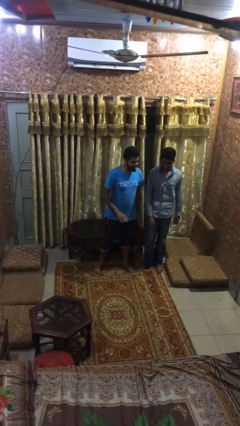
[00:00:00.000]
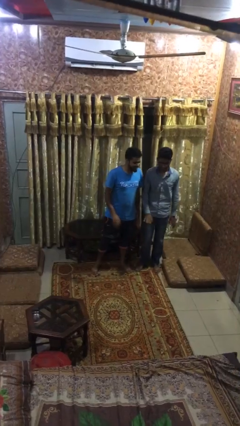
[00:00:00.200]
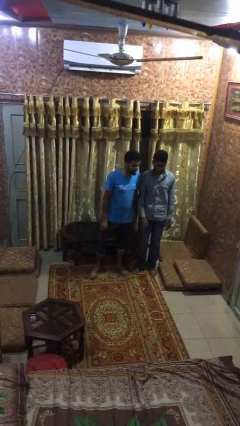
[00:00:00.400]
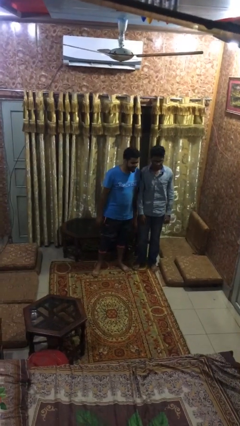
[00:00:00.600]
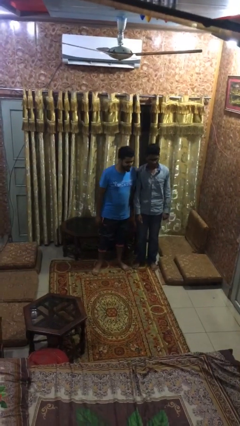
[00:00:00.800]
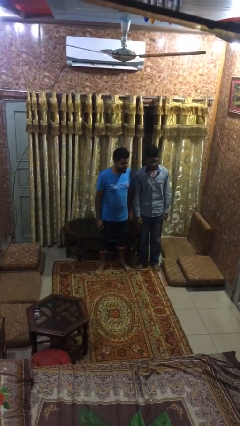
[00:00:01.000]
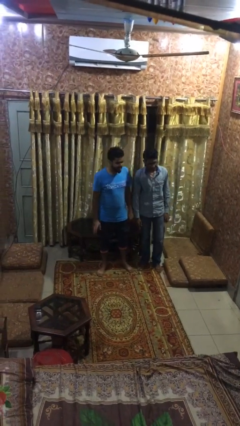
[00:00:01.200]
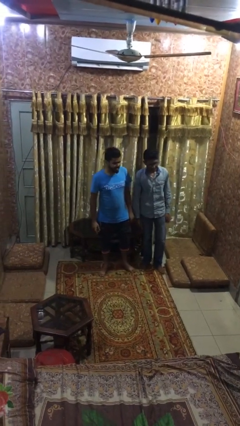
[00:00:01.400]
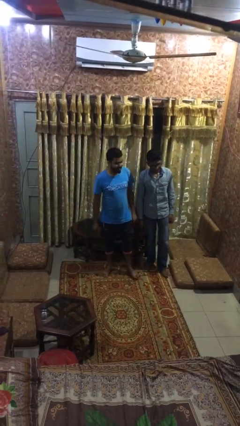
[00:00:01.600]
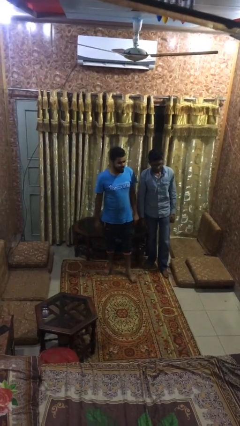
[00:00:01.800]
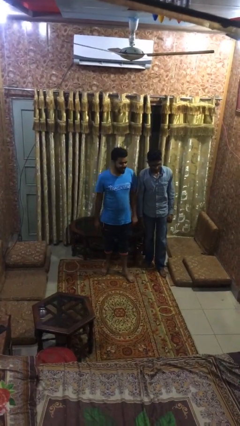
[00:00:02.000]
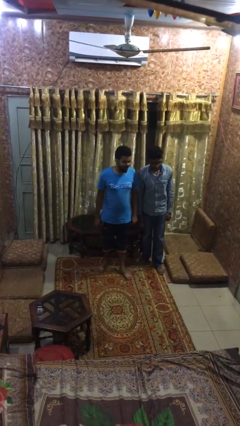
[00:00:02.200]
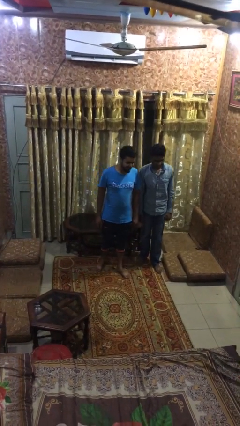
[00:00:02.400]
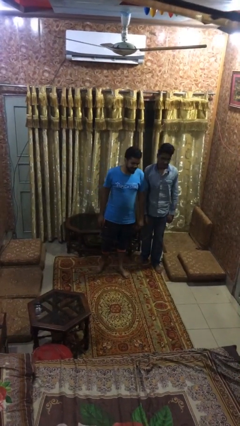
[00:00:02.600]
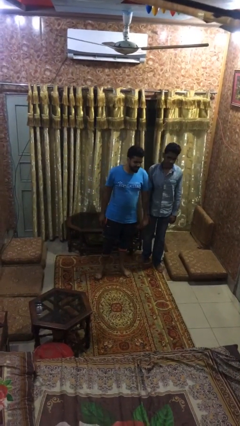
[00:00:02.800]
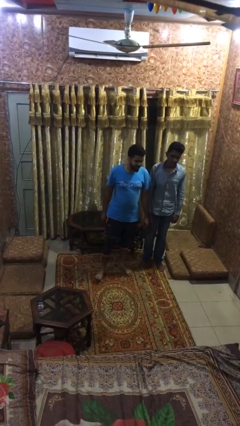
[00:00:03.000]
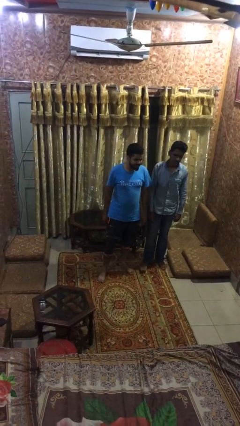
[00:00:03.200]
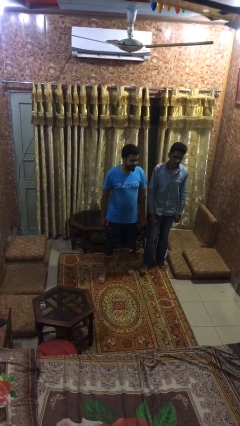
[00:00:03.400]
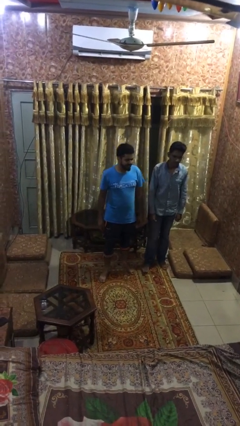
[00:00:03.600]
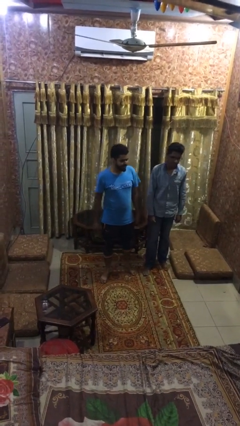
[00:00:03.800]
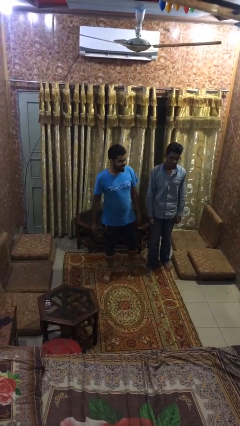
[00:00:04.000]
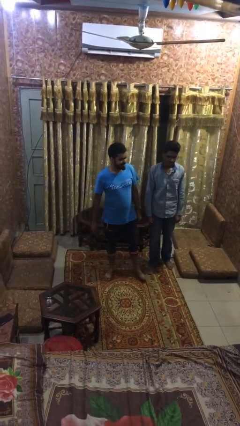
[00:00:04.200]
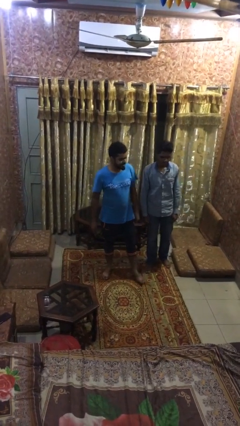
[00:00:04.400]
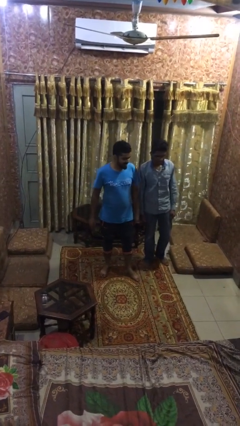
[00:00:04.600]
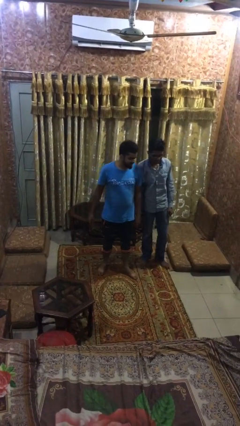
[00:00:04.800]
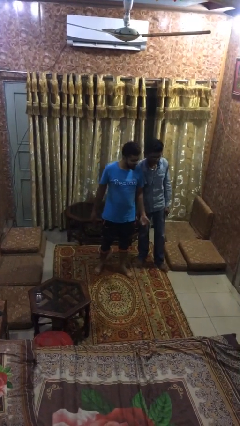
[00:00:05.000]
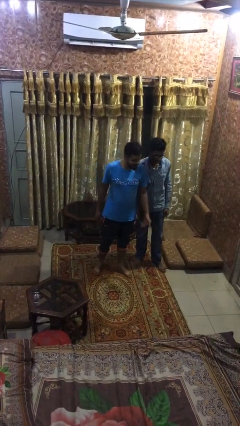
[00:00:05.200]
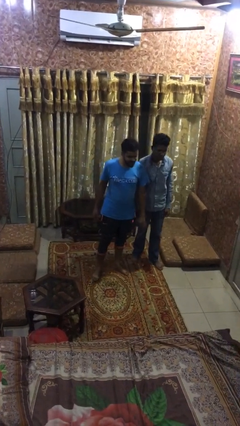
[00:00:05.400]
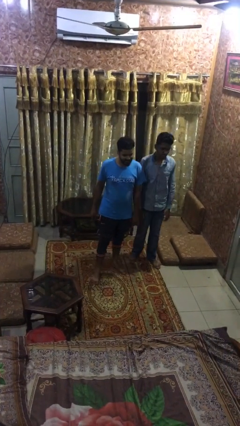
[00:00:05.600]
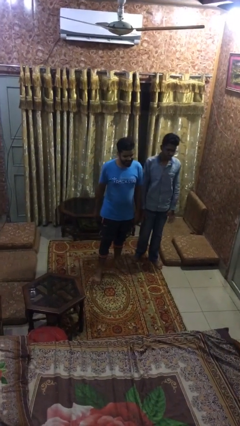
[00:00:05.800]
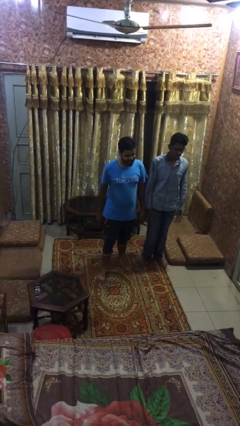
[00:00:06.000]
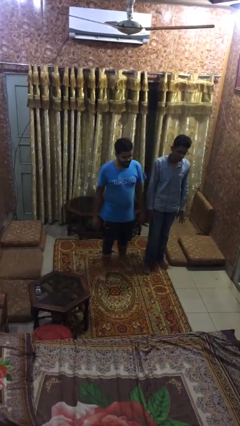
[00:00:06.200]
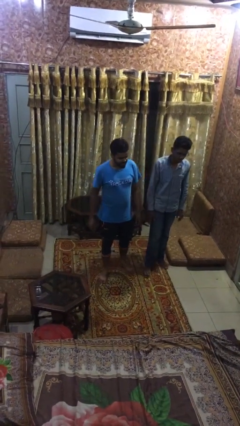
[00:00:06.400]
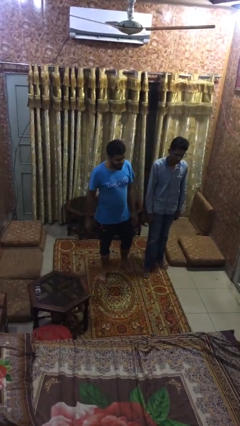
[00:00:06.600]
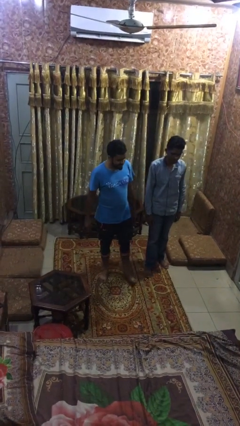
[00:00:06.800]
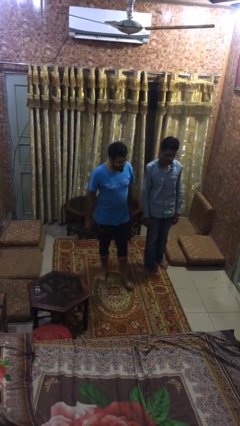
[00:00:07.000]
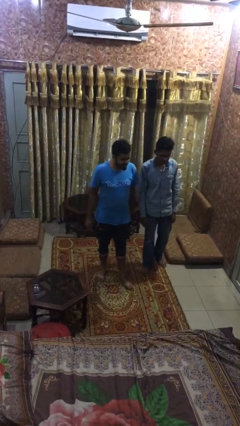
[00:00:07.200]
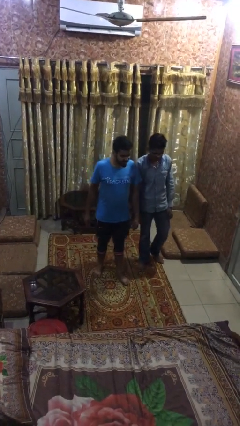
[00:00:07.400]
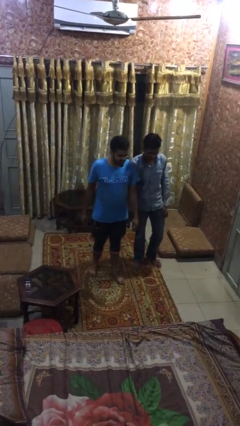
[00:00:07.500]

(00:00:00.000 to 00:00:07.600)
person talks to person

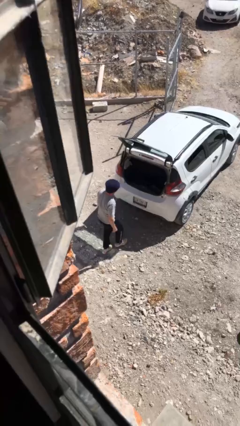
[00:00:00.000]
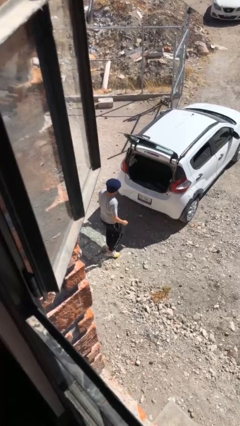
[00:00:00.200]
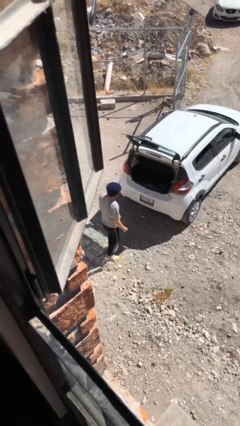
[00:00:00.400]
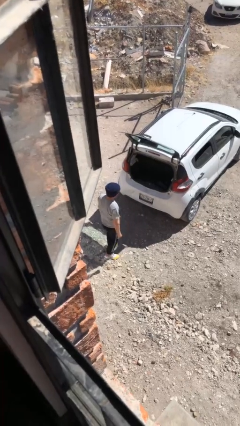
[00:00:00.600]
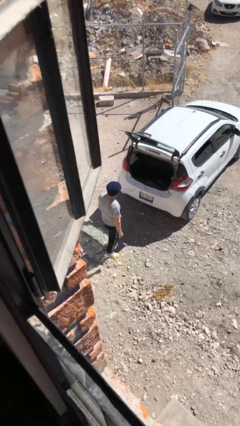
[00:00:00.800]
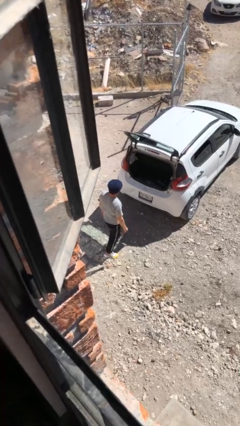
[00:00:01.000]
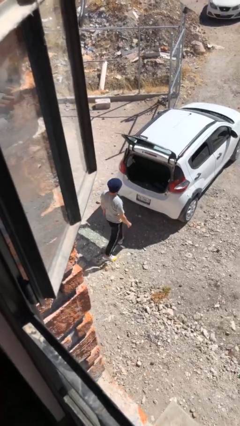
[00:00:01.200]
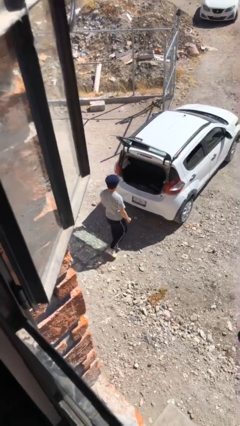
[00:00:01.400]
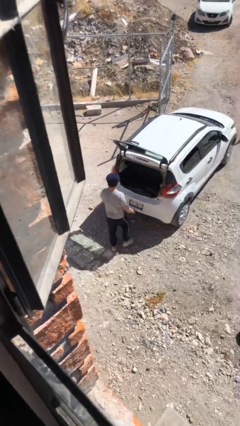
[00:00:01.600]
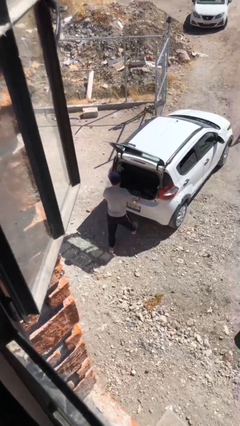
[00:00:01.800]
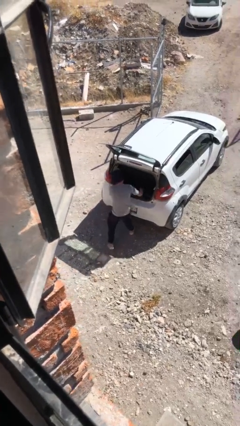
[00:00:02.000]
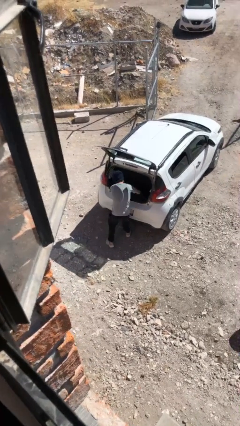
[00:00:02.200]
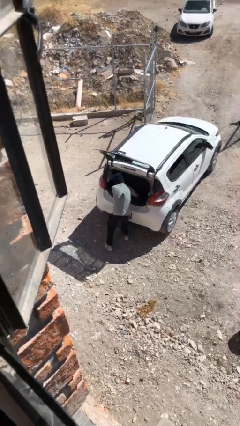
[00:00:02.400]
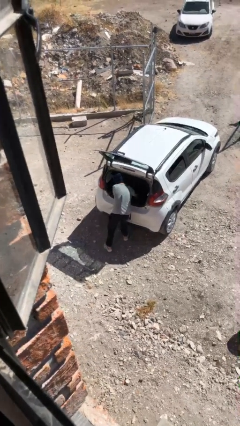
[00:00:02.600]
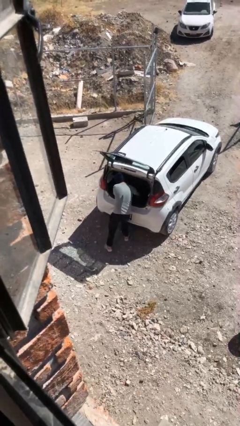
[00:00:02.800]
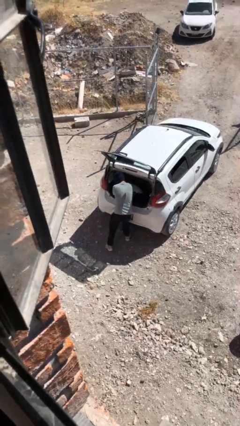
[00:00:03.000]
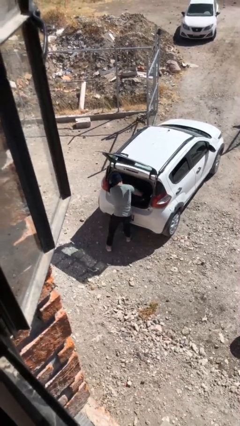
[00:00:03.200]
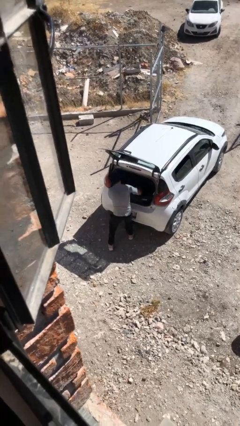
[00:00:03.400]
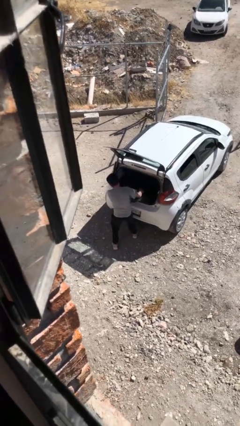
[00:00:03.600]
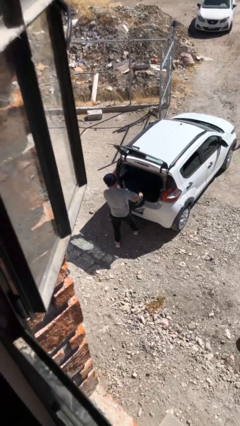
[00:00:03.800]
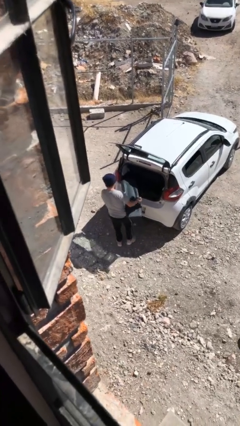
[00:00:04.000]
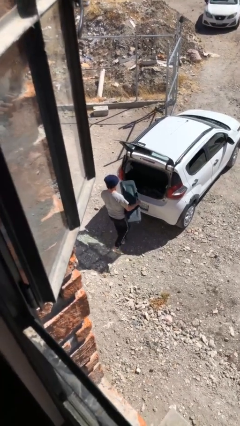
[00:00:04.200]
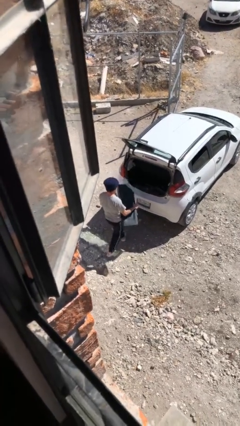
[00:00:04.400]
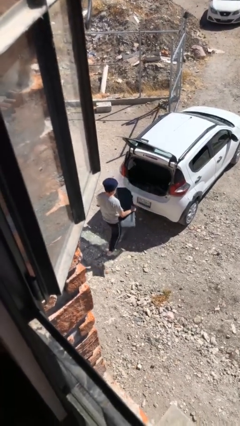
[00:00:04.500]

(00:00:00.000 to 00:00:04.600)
person unloads car

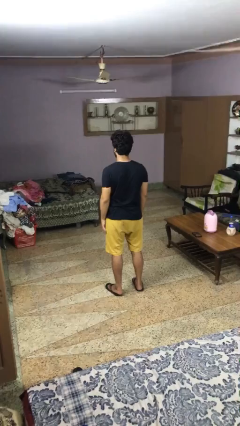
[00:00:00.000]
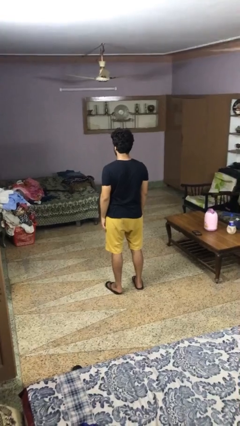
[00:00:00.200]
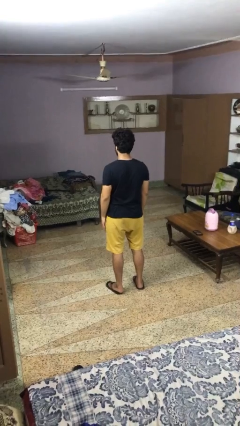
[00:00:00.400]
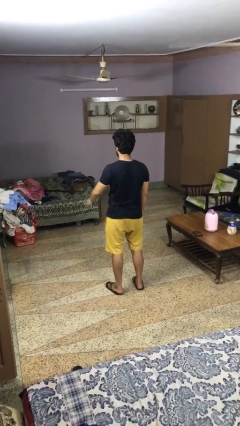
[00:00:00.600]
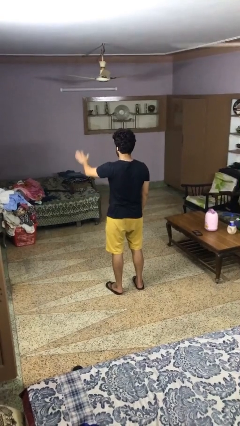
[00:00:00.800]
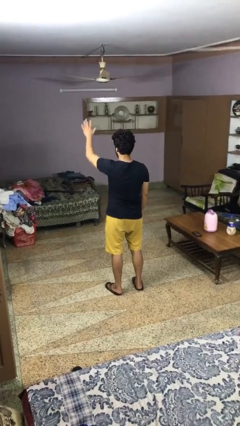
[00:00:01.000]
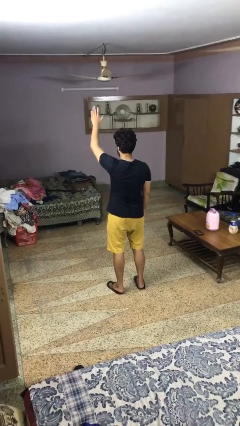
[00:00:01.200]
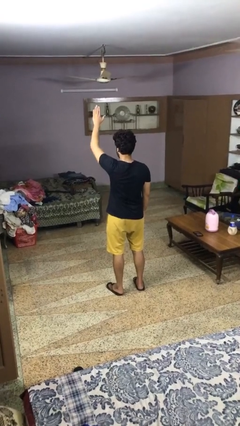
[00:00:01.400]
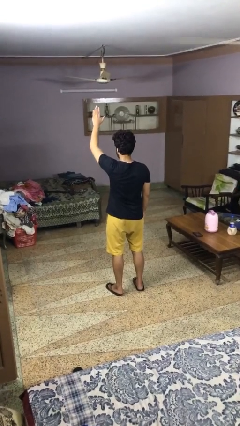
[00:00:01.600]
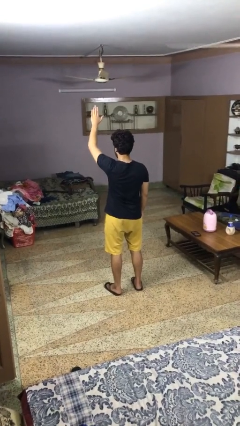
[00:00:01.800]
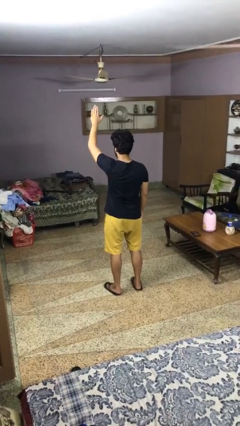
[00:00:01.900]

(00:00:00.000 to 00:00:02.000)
person gestures raise hand

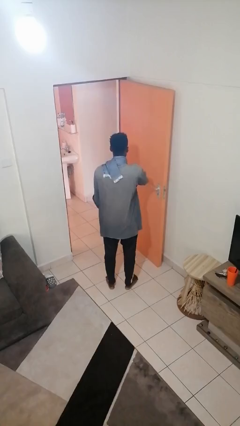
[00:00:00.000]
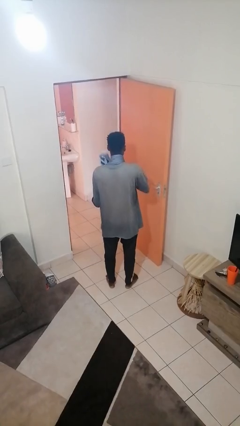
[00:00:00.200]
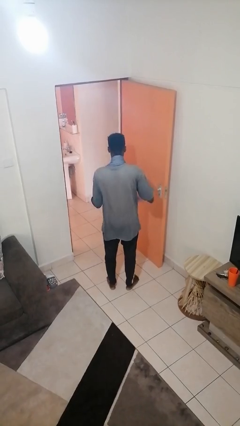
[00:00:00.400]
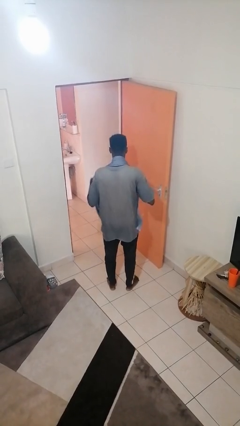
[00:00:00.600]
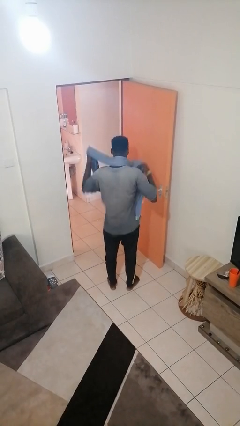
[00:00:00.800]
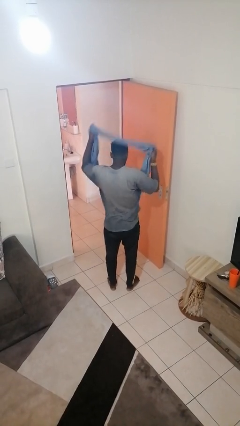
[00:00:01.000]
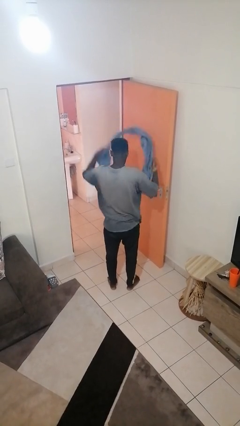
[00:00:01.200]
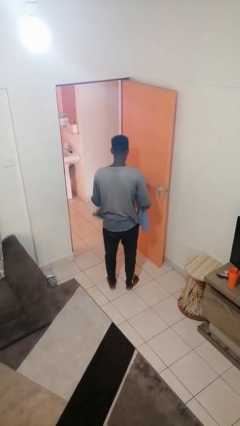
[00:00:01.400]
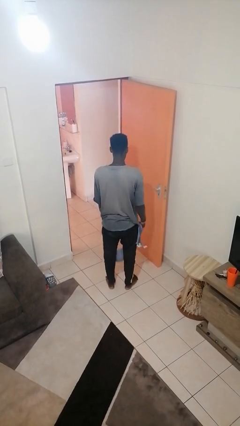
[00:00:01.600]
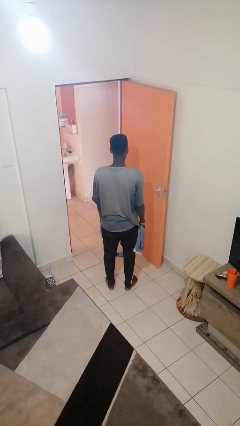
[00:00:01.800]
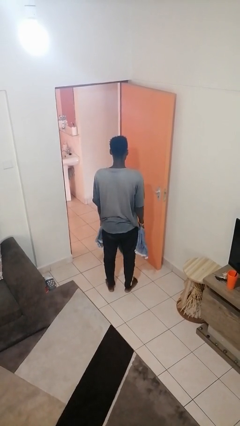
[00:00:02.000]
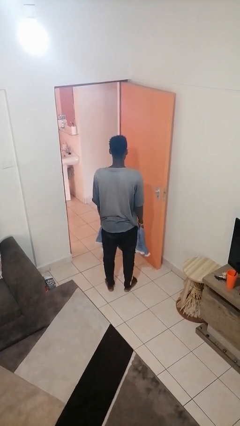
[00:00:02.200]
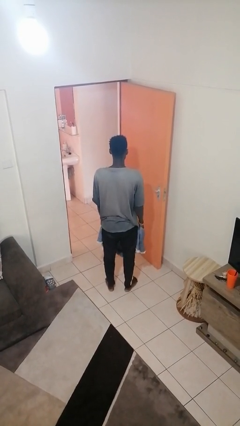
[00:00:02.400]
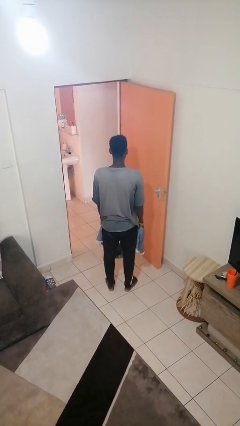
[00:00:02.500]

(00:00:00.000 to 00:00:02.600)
person takes off scarf

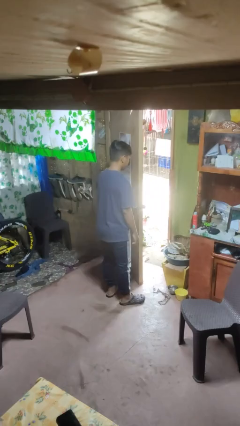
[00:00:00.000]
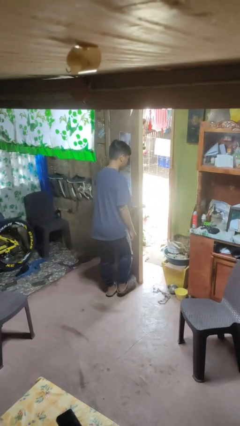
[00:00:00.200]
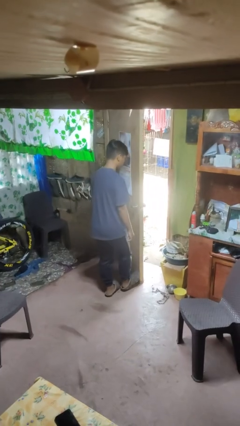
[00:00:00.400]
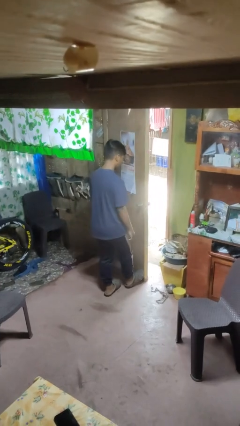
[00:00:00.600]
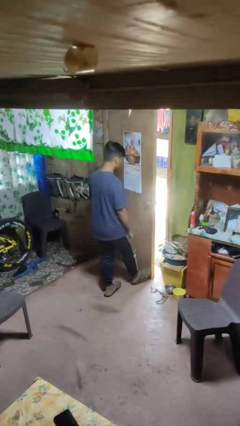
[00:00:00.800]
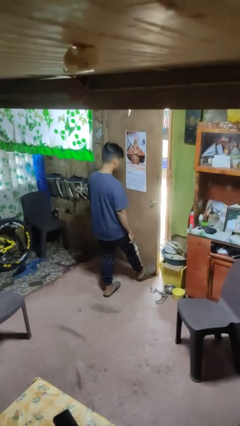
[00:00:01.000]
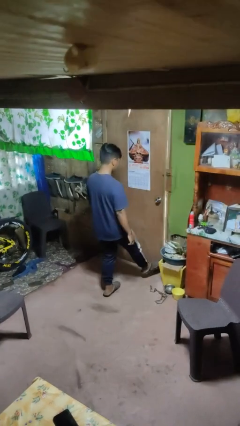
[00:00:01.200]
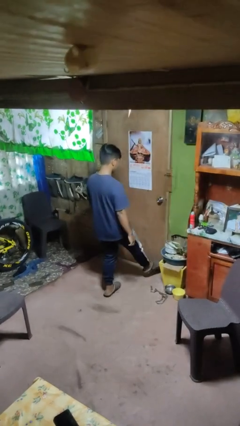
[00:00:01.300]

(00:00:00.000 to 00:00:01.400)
person closes door with foot
